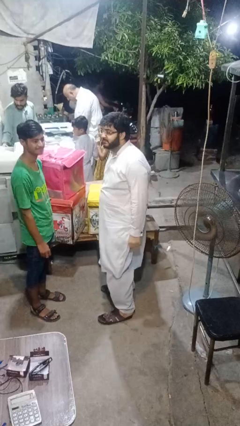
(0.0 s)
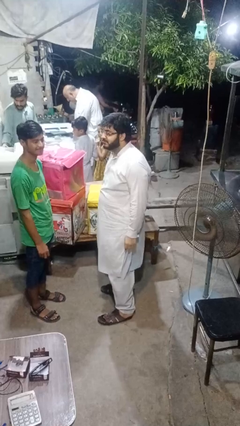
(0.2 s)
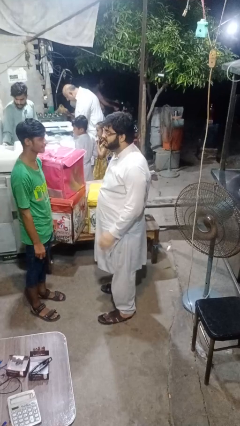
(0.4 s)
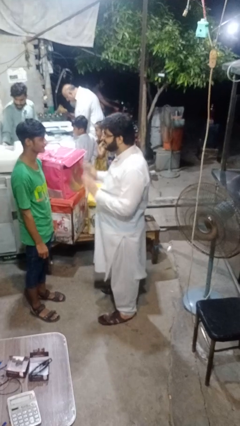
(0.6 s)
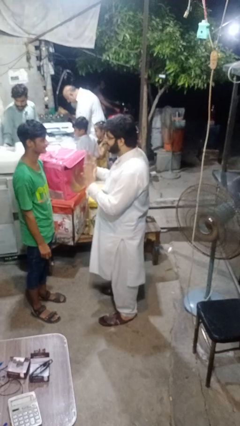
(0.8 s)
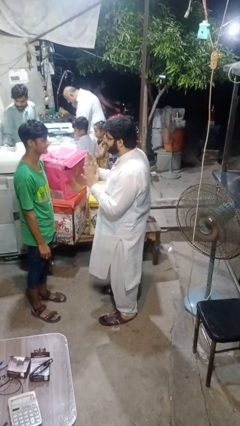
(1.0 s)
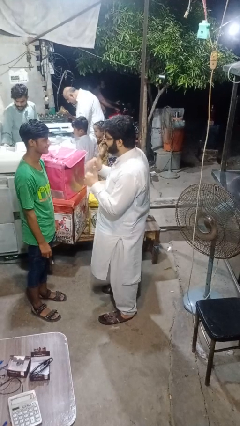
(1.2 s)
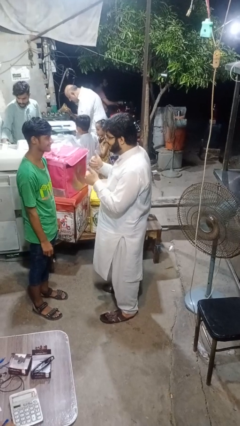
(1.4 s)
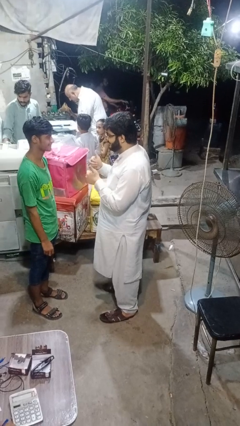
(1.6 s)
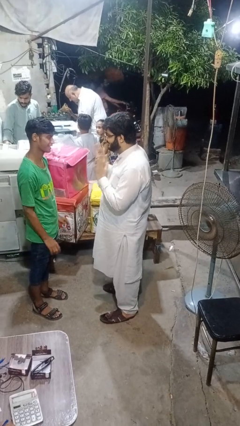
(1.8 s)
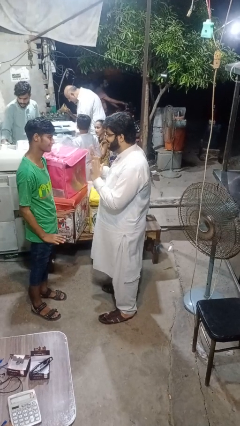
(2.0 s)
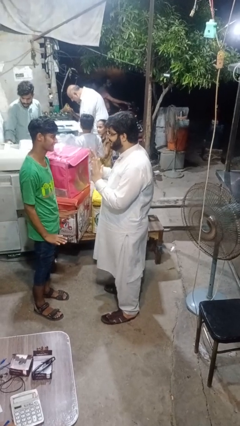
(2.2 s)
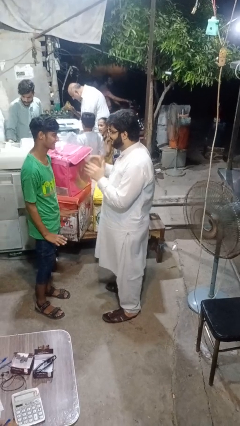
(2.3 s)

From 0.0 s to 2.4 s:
person talks to person

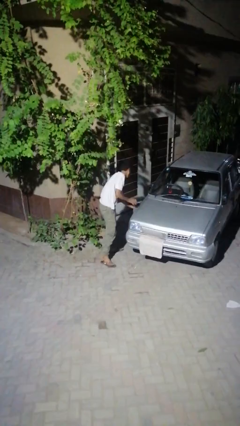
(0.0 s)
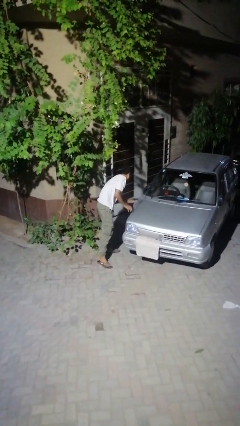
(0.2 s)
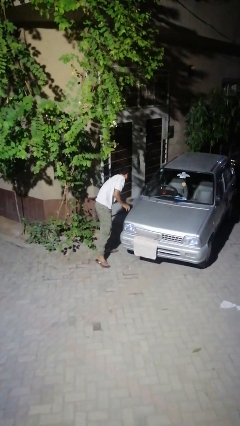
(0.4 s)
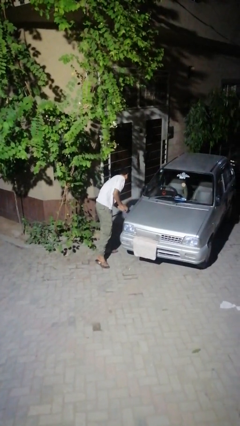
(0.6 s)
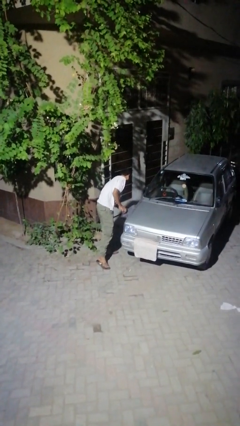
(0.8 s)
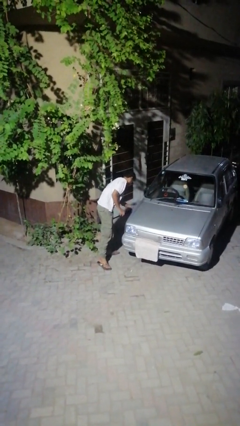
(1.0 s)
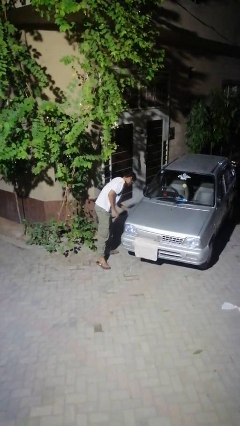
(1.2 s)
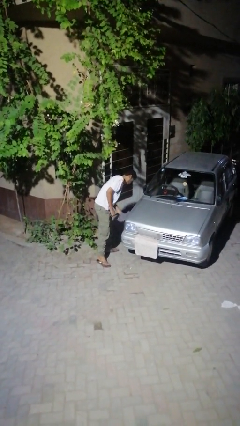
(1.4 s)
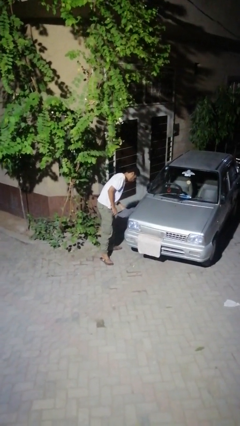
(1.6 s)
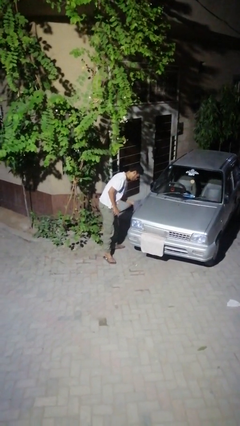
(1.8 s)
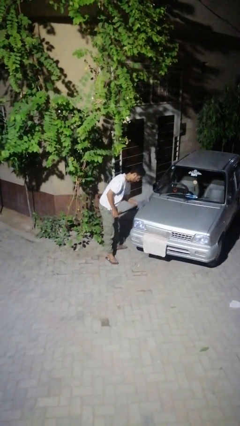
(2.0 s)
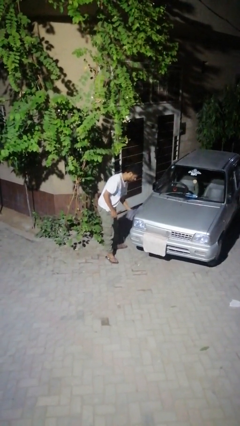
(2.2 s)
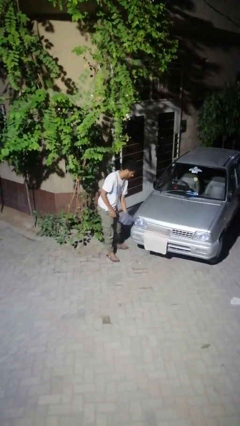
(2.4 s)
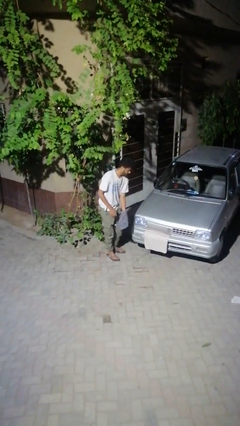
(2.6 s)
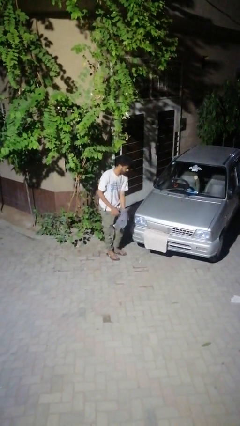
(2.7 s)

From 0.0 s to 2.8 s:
person polishes car with rag

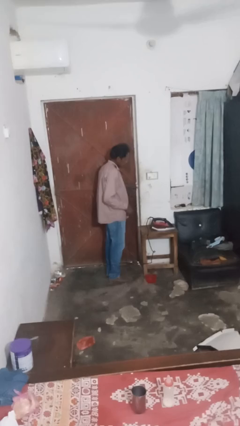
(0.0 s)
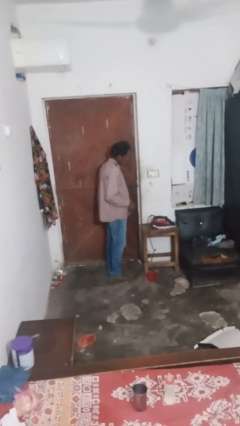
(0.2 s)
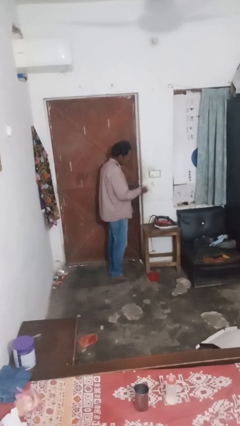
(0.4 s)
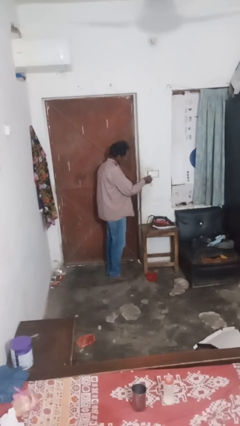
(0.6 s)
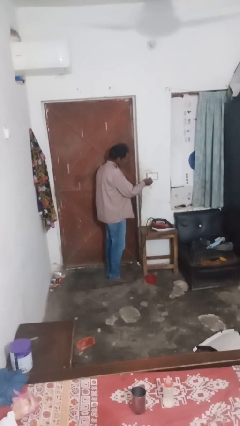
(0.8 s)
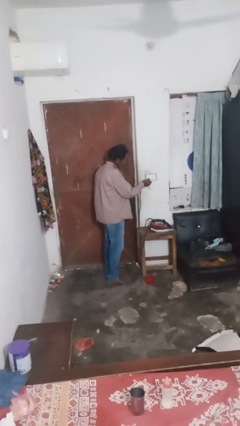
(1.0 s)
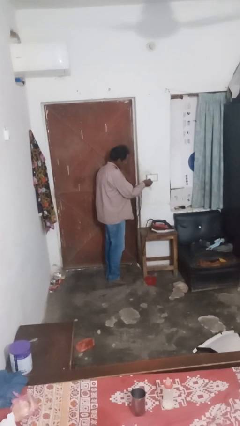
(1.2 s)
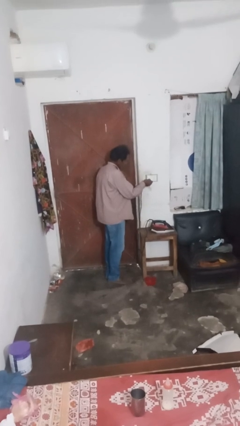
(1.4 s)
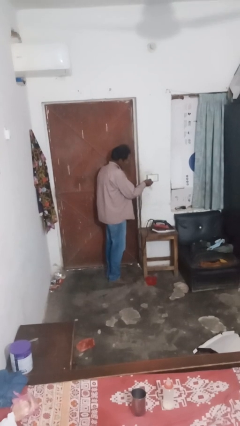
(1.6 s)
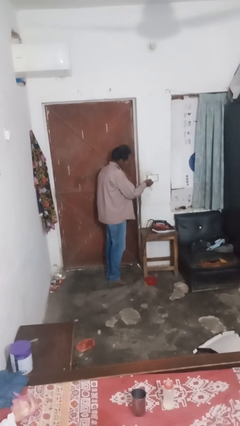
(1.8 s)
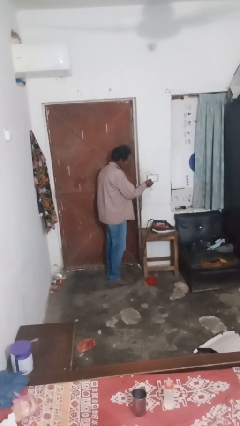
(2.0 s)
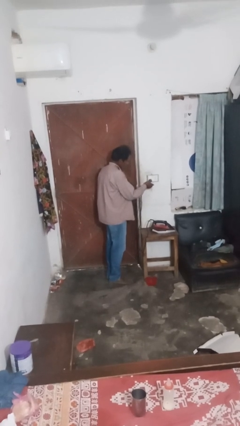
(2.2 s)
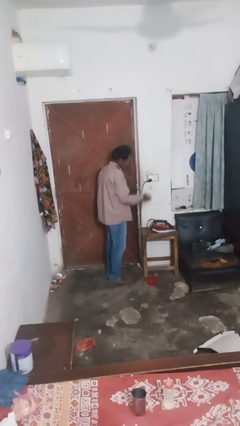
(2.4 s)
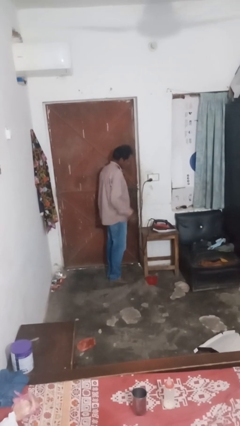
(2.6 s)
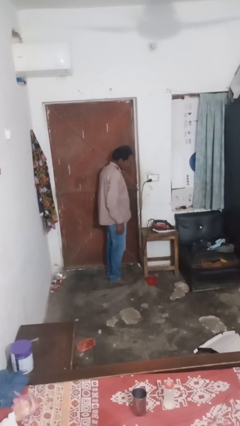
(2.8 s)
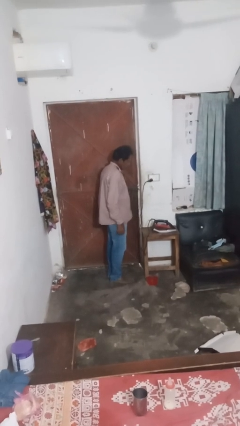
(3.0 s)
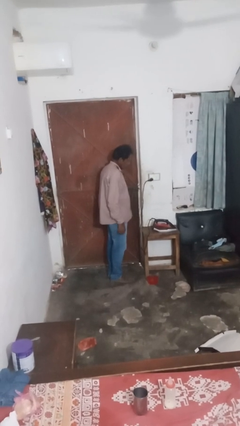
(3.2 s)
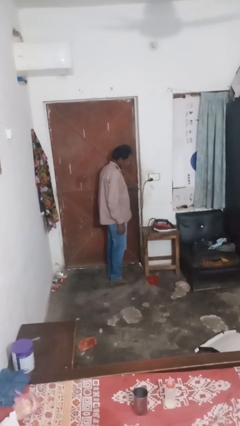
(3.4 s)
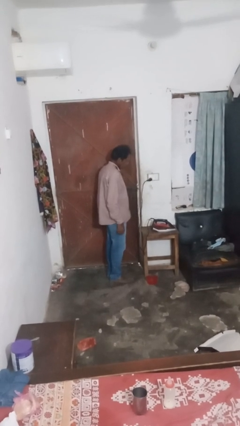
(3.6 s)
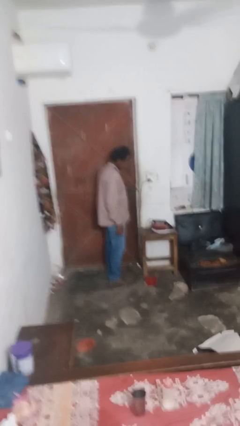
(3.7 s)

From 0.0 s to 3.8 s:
person plugs into electrical socket

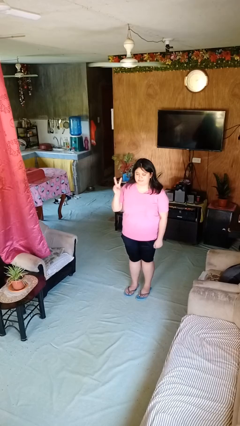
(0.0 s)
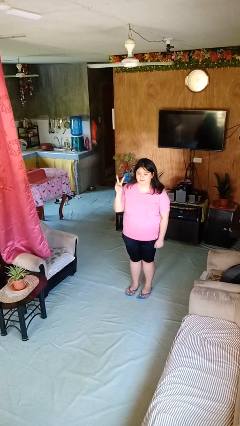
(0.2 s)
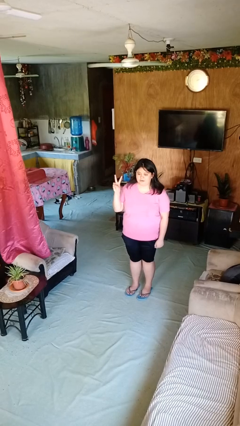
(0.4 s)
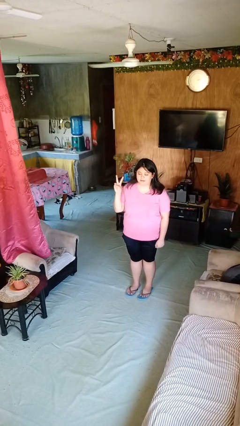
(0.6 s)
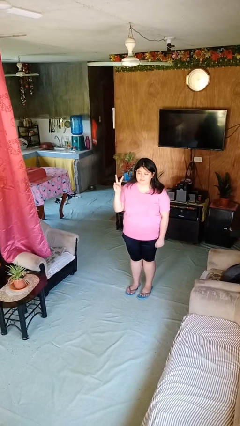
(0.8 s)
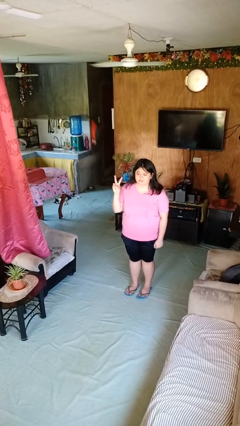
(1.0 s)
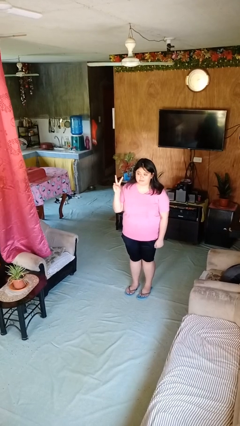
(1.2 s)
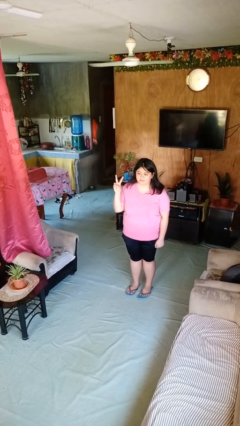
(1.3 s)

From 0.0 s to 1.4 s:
person gestures peace

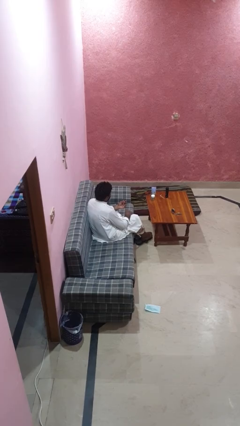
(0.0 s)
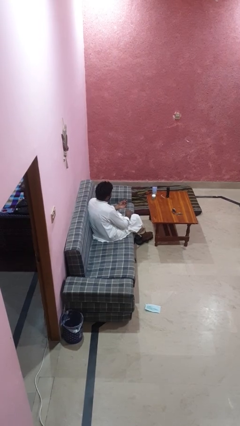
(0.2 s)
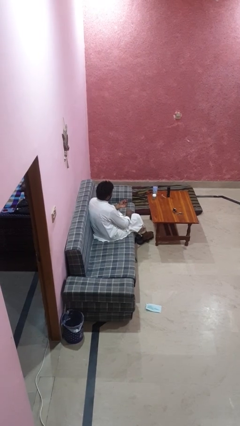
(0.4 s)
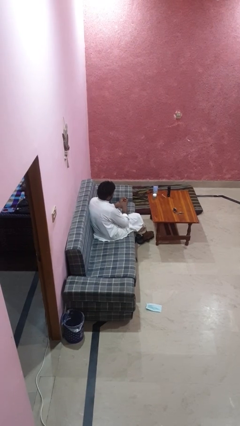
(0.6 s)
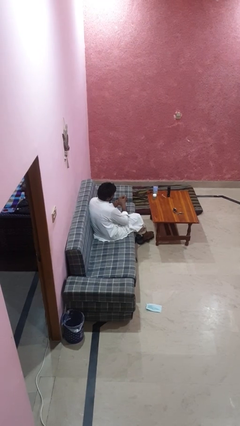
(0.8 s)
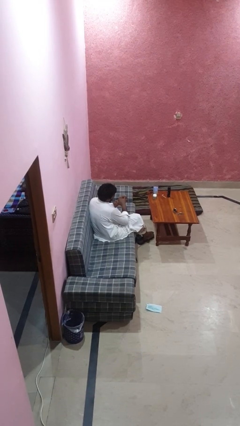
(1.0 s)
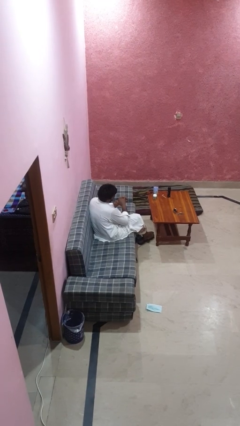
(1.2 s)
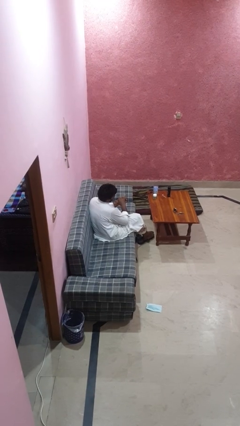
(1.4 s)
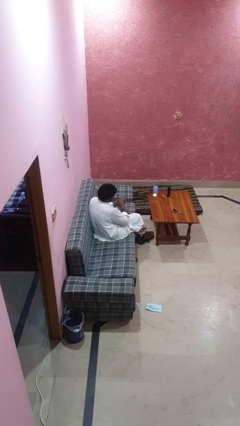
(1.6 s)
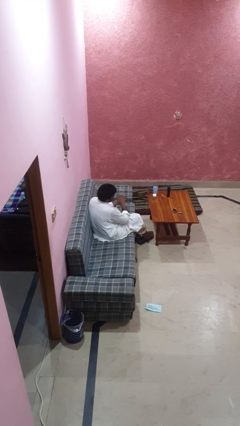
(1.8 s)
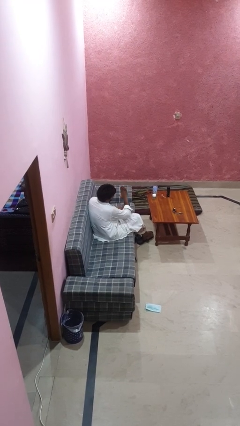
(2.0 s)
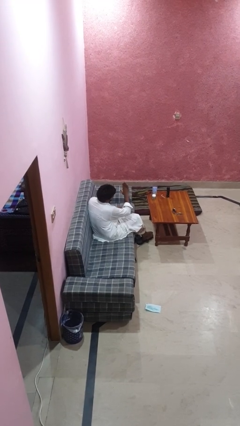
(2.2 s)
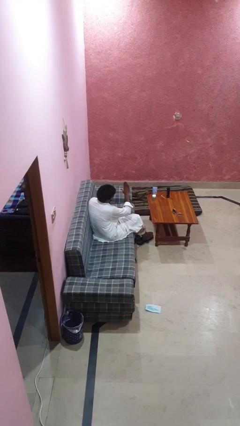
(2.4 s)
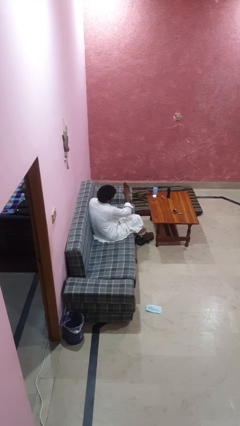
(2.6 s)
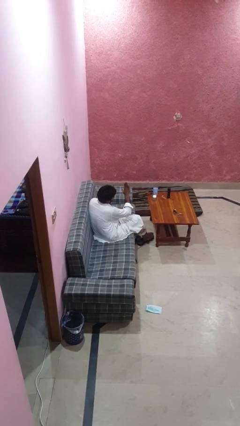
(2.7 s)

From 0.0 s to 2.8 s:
person puts on ring

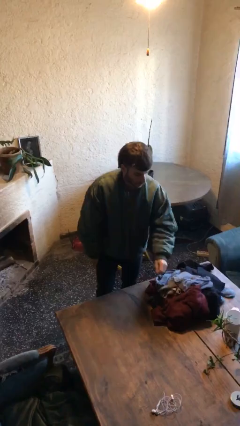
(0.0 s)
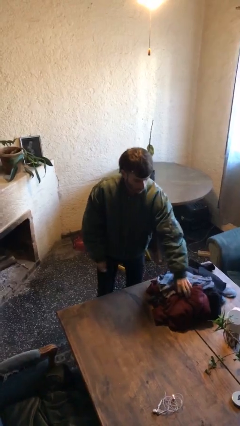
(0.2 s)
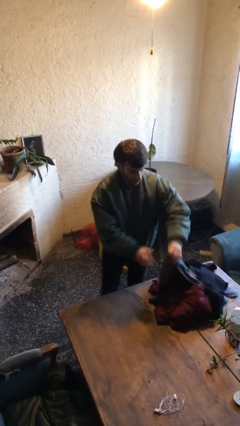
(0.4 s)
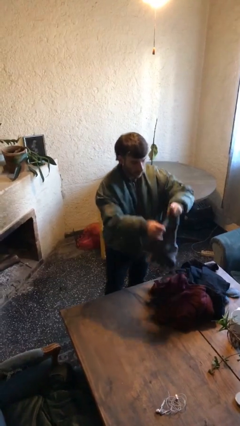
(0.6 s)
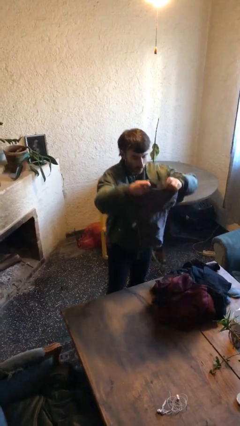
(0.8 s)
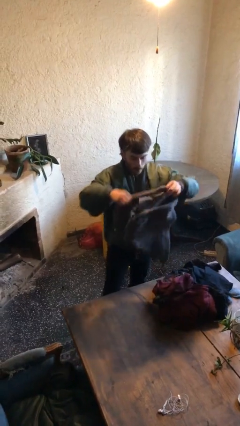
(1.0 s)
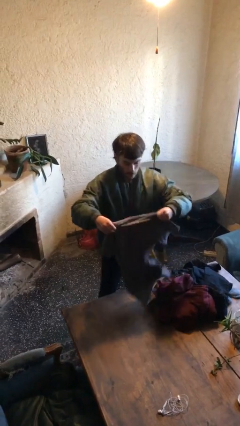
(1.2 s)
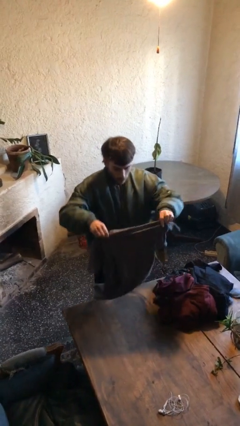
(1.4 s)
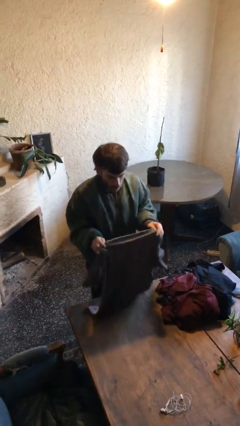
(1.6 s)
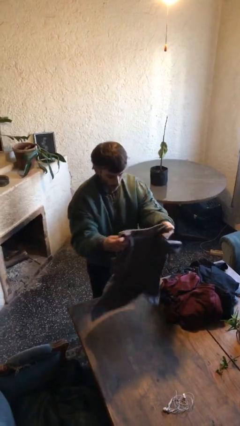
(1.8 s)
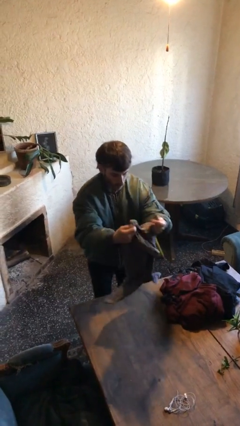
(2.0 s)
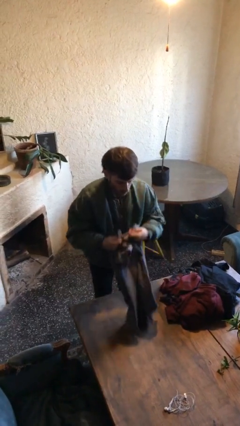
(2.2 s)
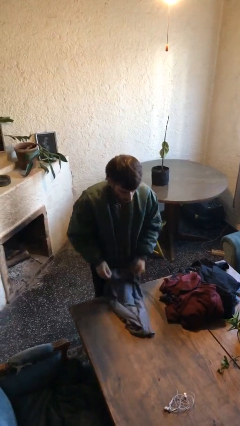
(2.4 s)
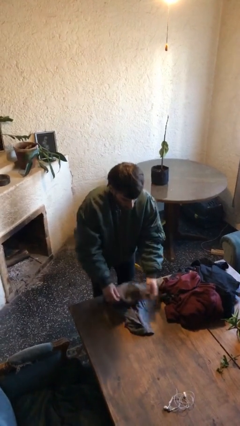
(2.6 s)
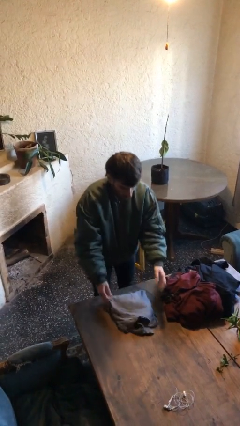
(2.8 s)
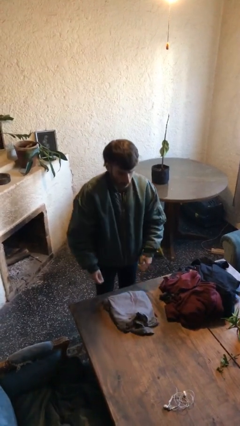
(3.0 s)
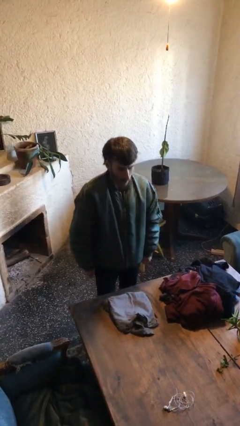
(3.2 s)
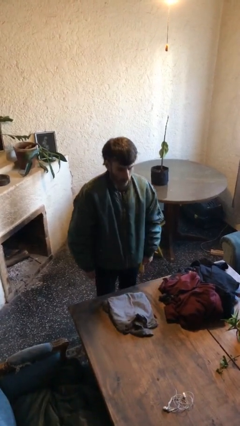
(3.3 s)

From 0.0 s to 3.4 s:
person folds shirt

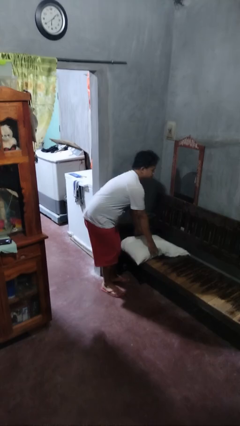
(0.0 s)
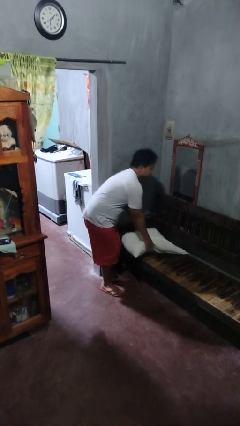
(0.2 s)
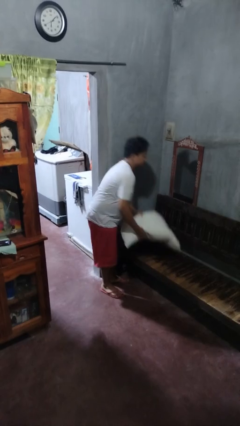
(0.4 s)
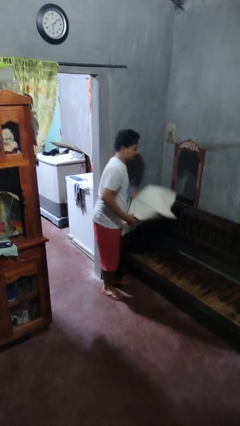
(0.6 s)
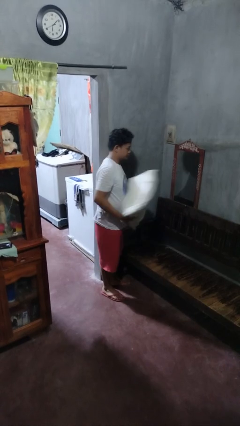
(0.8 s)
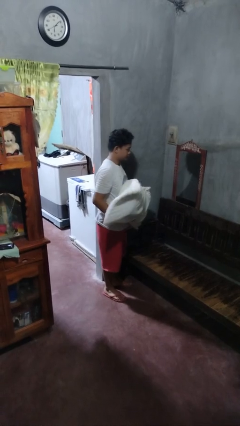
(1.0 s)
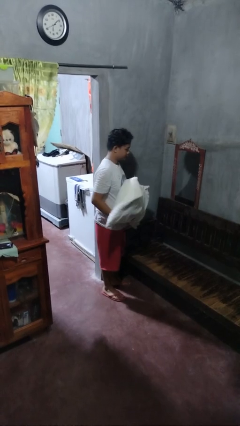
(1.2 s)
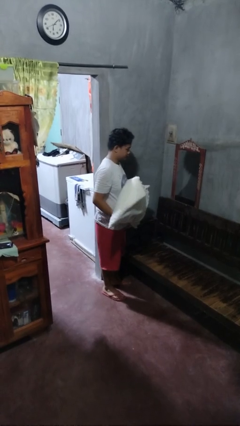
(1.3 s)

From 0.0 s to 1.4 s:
person picks up object from couch
